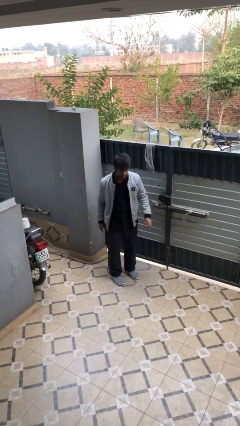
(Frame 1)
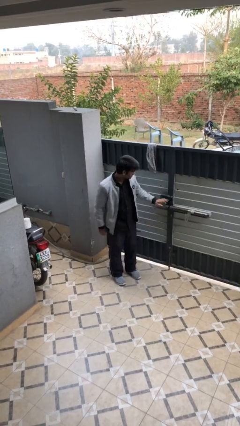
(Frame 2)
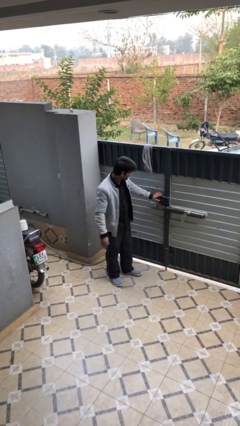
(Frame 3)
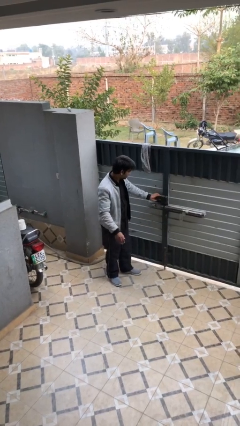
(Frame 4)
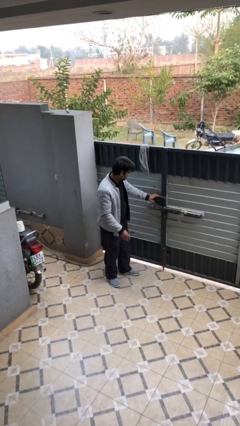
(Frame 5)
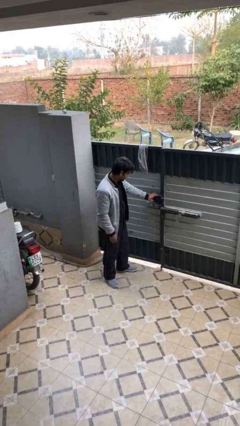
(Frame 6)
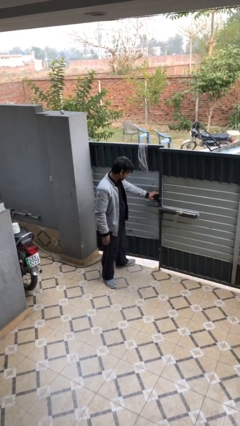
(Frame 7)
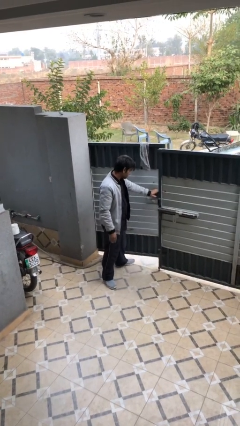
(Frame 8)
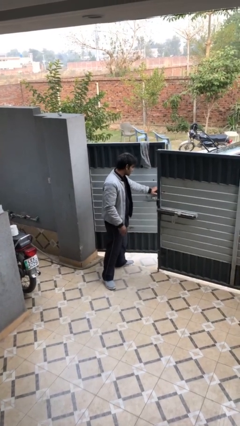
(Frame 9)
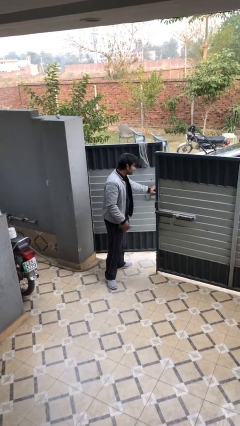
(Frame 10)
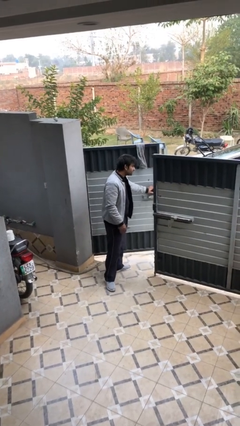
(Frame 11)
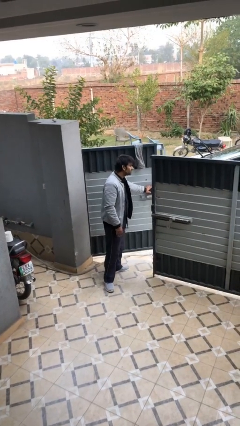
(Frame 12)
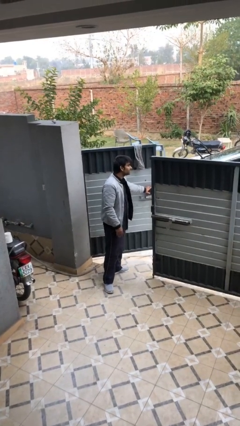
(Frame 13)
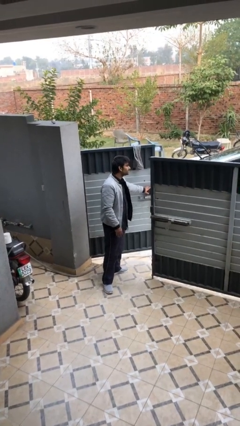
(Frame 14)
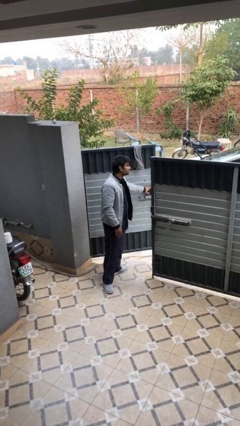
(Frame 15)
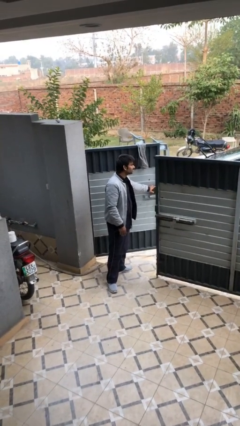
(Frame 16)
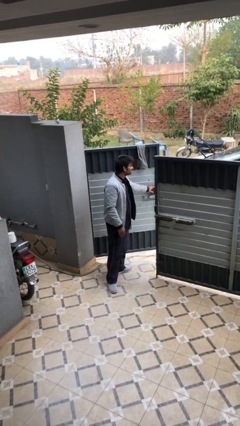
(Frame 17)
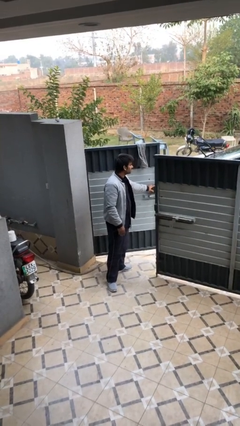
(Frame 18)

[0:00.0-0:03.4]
person opens facility door

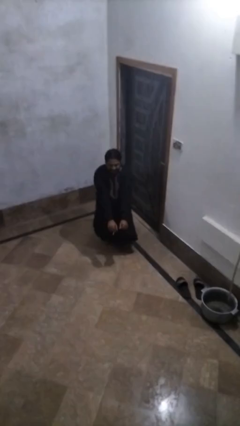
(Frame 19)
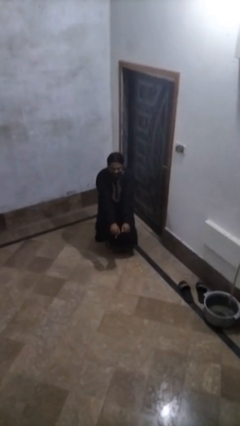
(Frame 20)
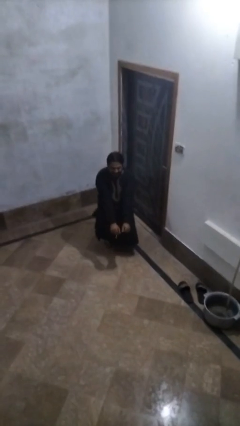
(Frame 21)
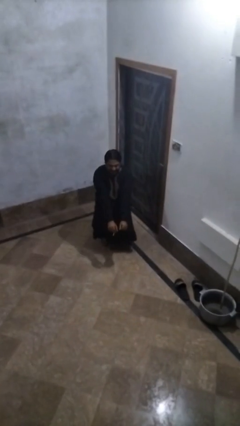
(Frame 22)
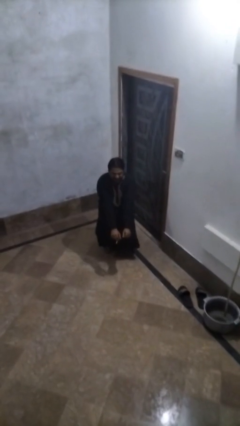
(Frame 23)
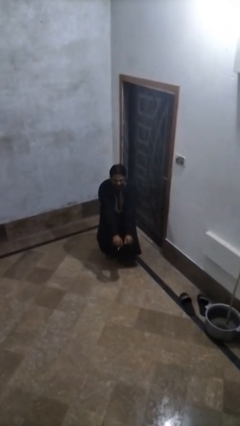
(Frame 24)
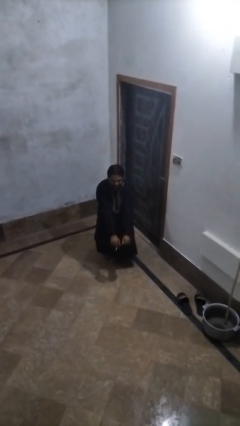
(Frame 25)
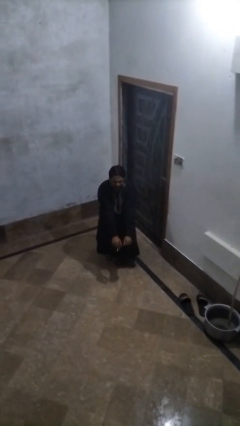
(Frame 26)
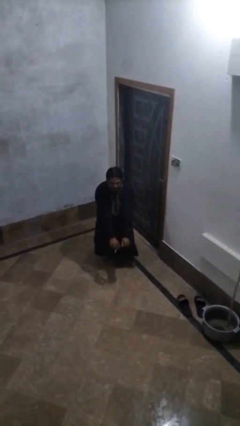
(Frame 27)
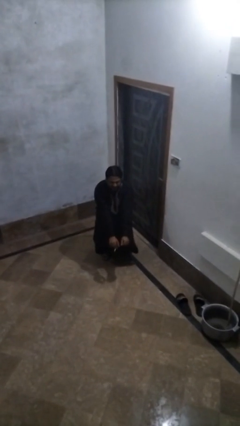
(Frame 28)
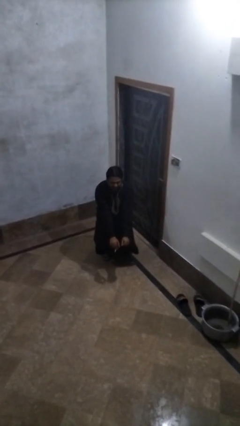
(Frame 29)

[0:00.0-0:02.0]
person squats

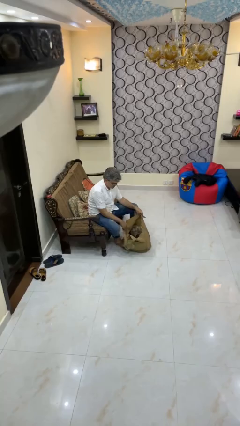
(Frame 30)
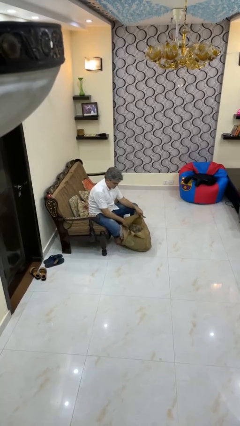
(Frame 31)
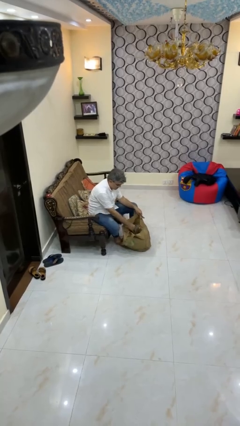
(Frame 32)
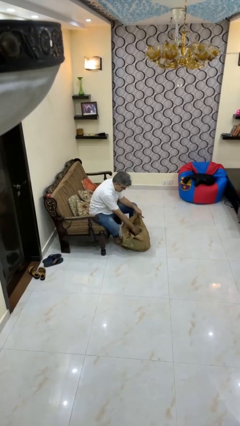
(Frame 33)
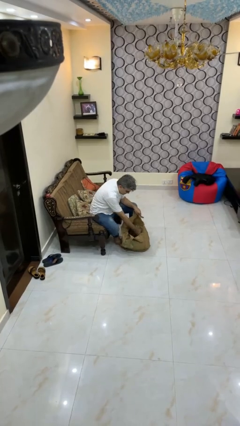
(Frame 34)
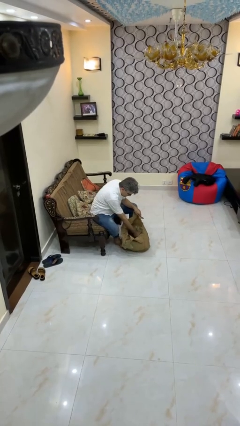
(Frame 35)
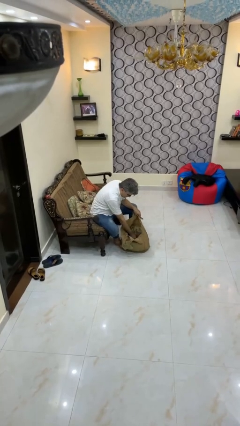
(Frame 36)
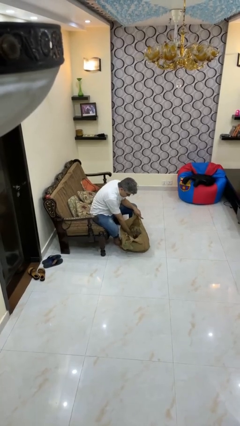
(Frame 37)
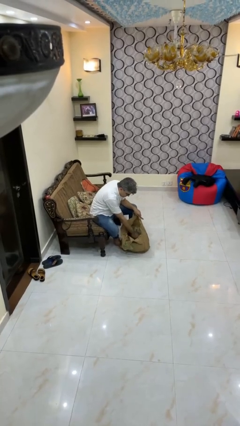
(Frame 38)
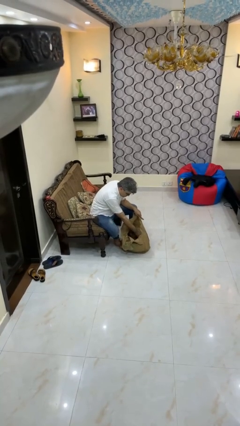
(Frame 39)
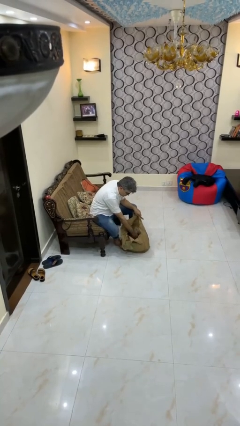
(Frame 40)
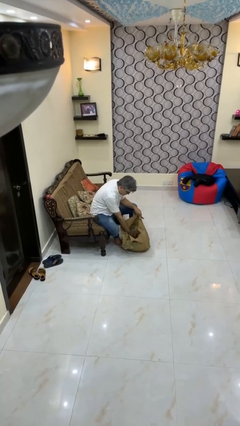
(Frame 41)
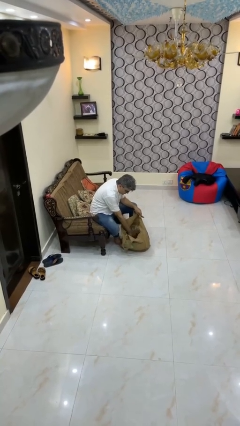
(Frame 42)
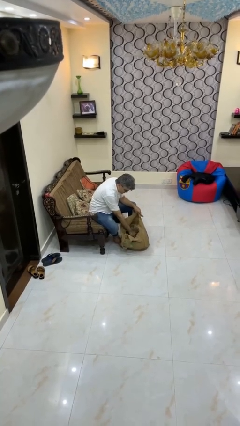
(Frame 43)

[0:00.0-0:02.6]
person searches in bag

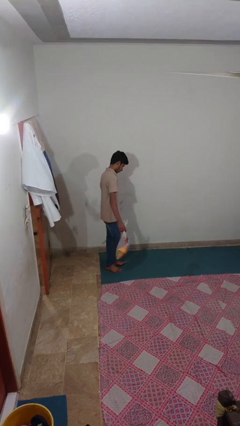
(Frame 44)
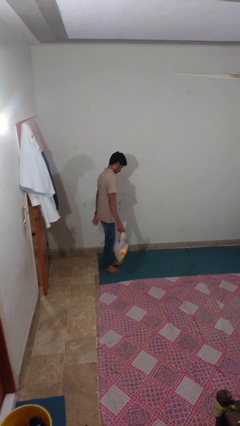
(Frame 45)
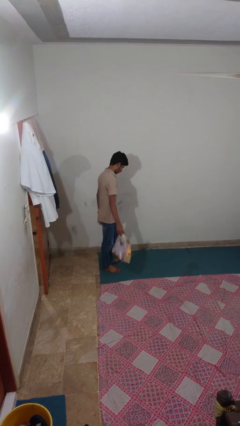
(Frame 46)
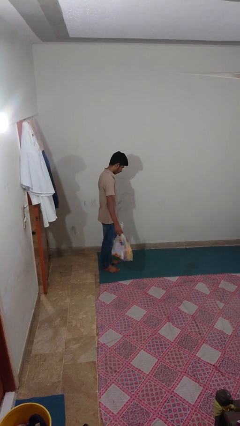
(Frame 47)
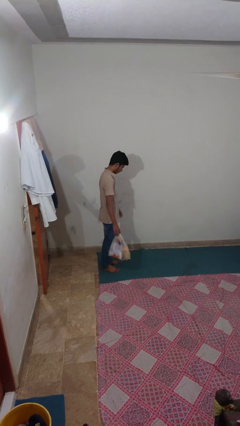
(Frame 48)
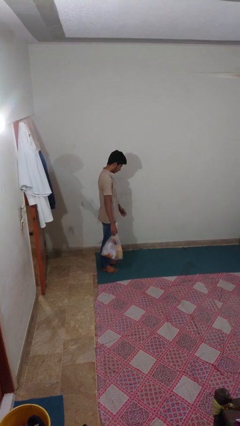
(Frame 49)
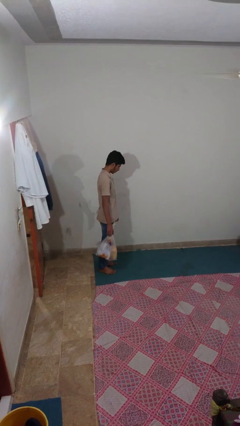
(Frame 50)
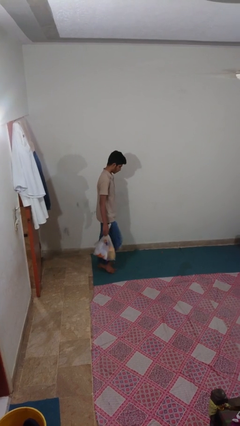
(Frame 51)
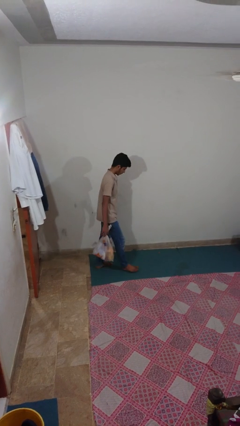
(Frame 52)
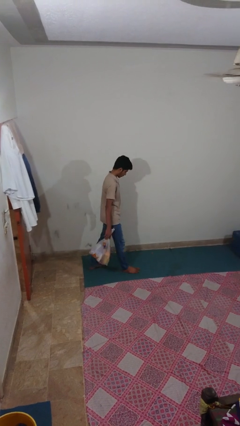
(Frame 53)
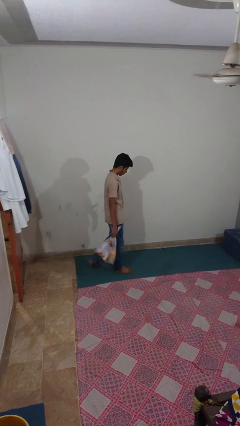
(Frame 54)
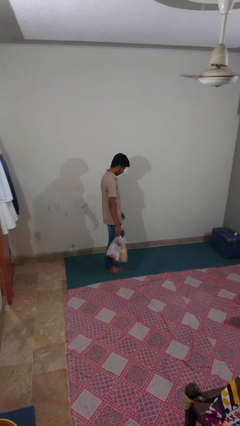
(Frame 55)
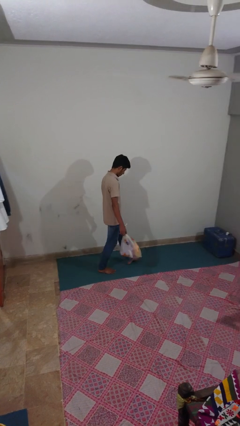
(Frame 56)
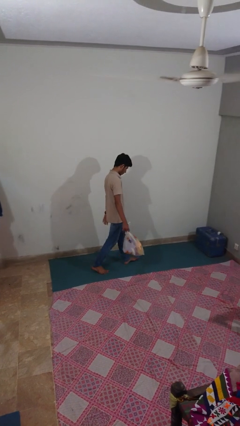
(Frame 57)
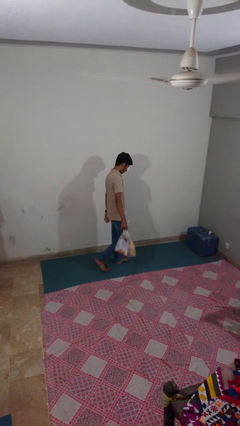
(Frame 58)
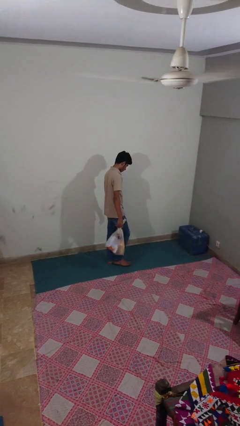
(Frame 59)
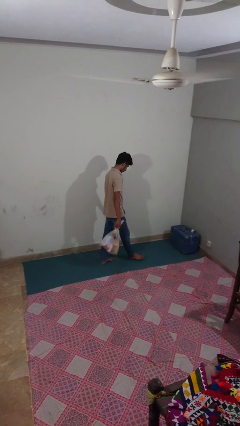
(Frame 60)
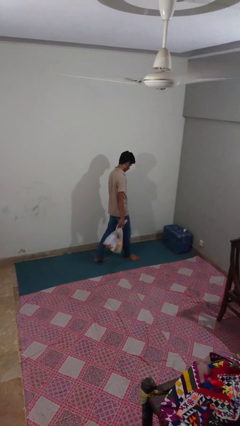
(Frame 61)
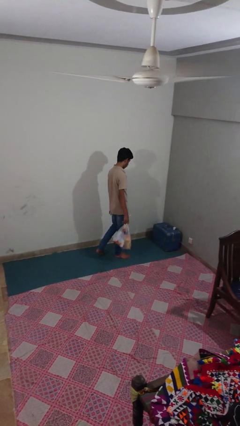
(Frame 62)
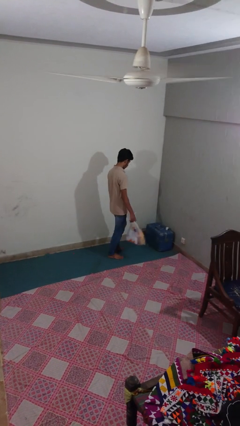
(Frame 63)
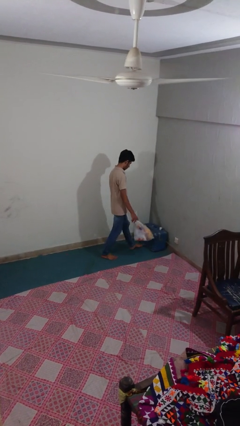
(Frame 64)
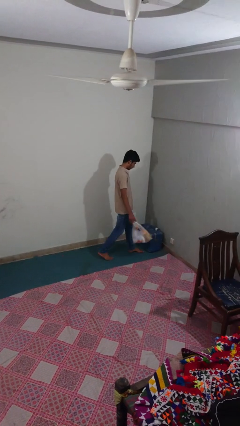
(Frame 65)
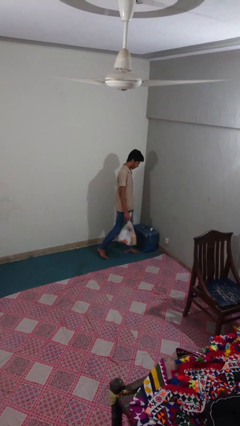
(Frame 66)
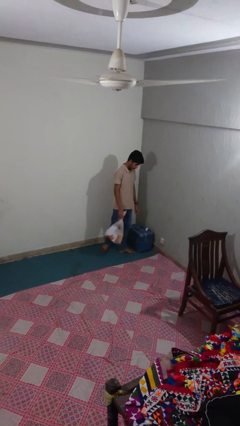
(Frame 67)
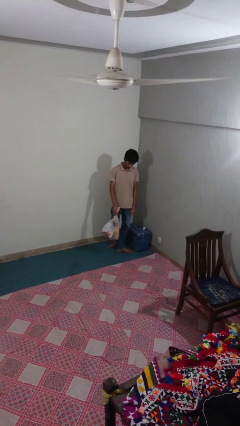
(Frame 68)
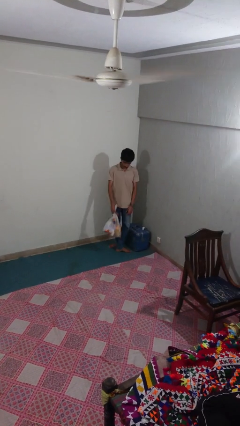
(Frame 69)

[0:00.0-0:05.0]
person carries groceries

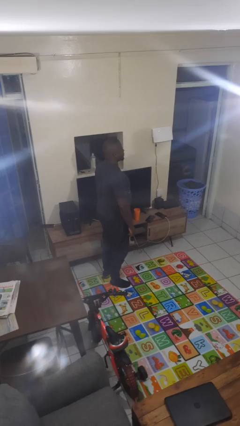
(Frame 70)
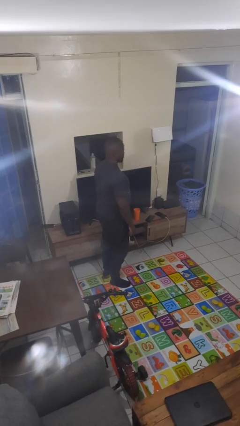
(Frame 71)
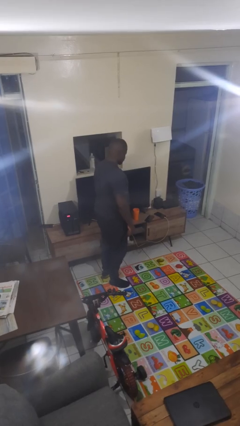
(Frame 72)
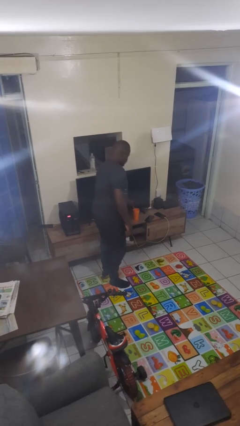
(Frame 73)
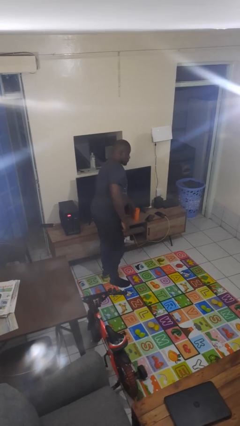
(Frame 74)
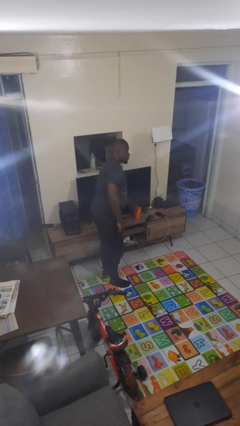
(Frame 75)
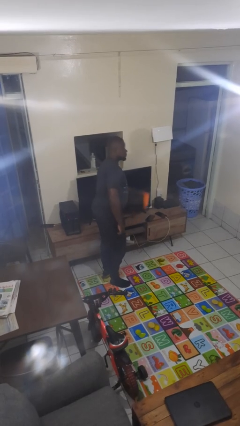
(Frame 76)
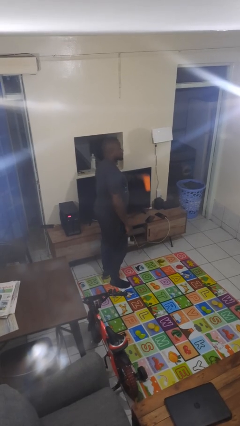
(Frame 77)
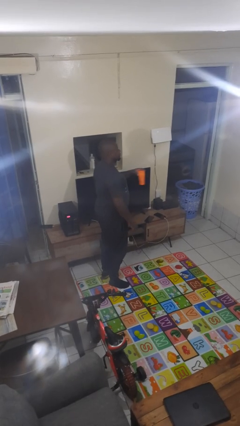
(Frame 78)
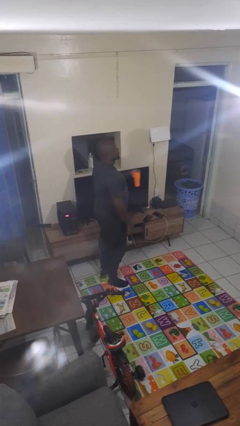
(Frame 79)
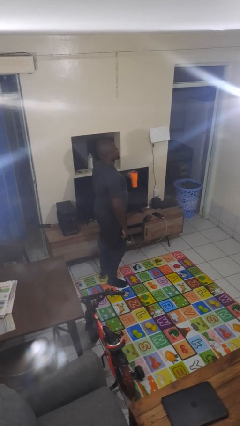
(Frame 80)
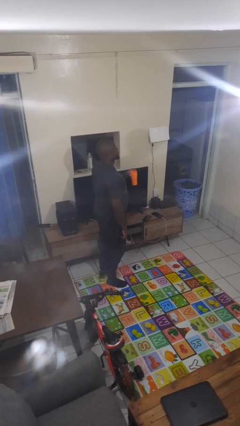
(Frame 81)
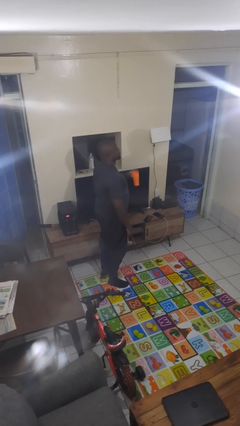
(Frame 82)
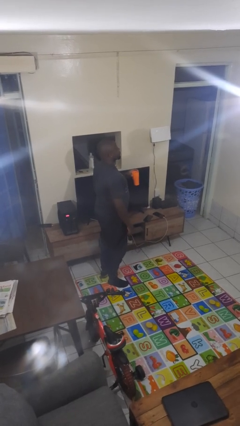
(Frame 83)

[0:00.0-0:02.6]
person picks up object from countertop

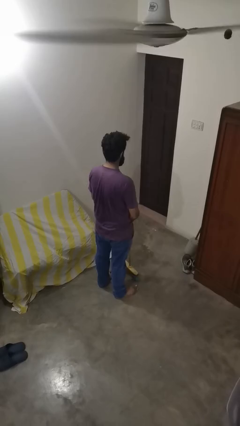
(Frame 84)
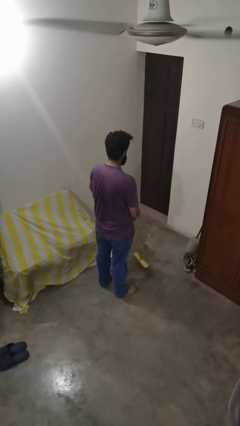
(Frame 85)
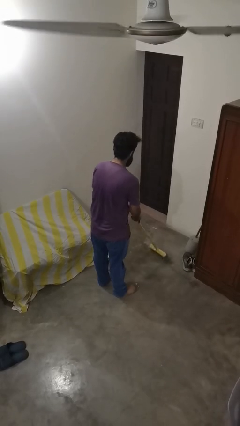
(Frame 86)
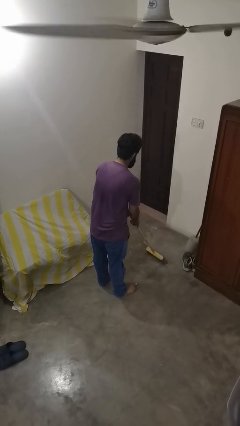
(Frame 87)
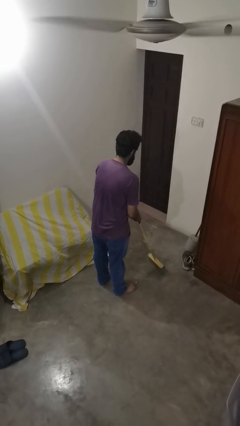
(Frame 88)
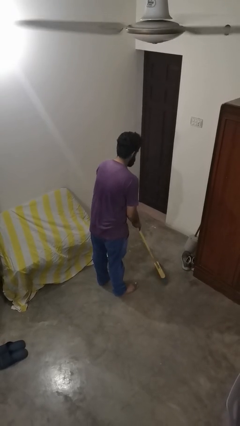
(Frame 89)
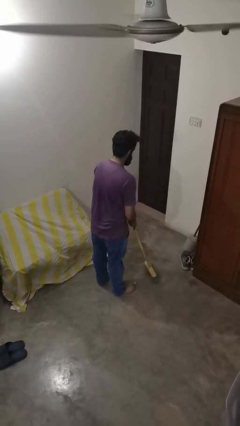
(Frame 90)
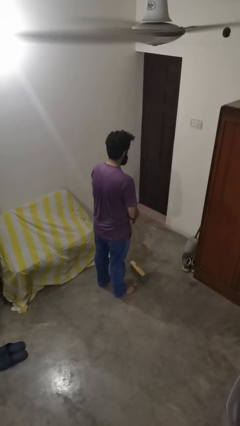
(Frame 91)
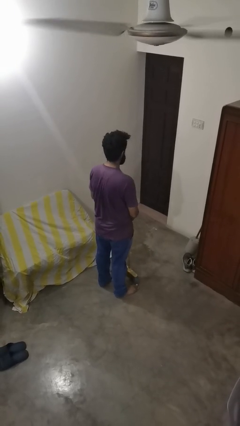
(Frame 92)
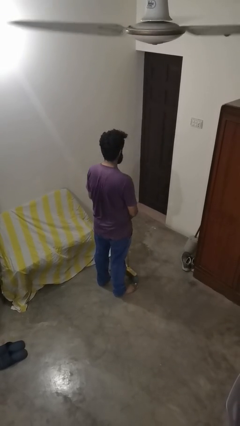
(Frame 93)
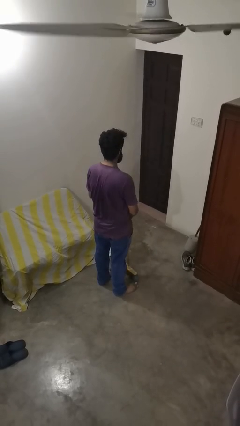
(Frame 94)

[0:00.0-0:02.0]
person sweeps floor
